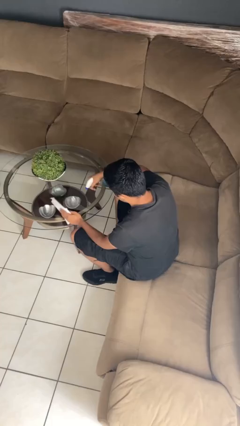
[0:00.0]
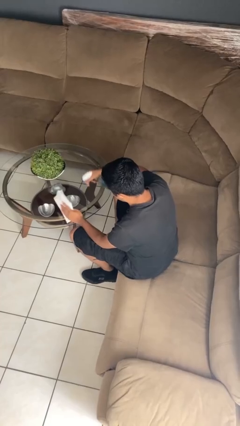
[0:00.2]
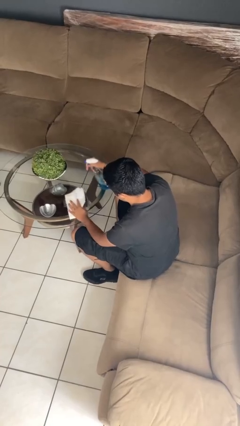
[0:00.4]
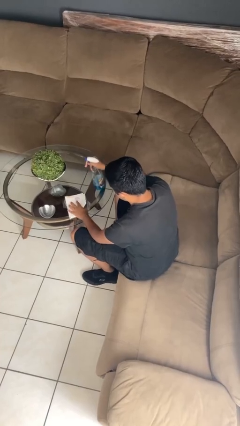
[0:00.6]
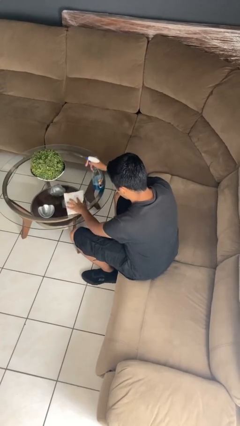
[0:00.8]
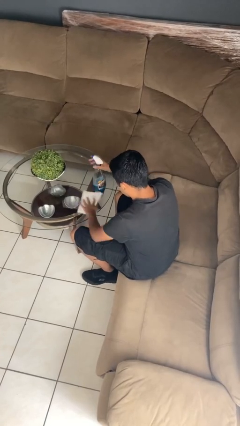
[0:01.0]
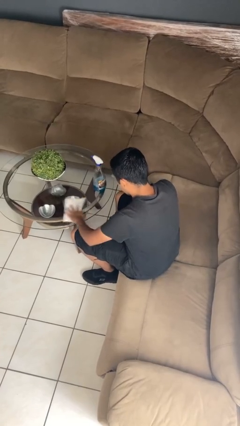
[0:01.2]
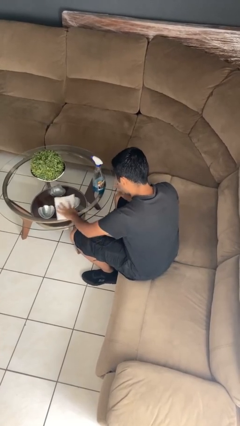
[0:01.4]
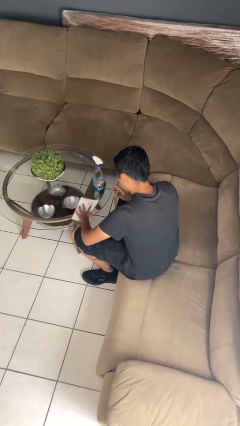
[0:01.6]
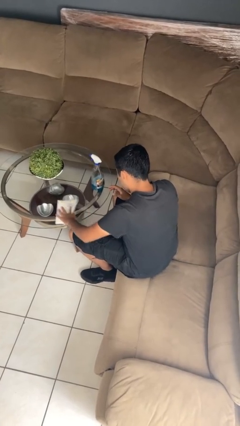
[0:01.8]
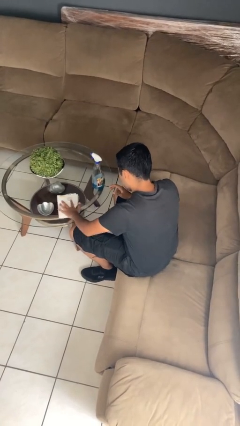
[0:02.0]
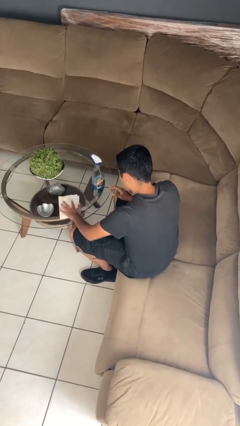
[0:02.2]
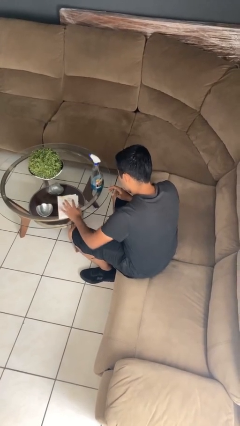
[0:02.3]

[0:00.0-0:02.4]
person cleans table with rag

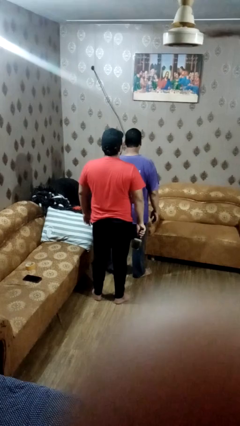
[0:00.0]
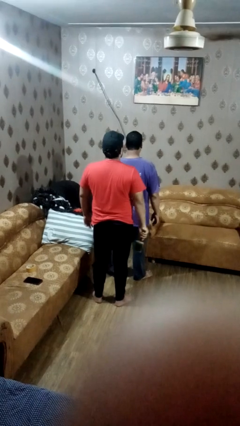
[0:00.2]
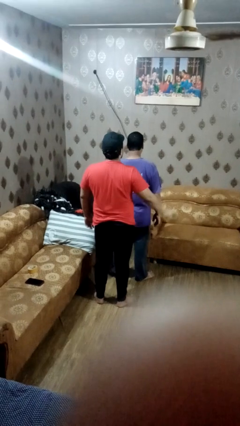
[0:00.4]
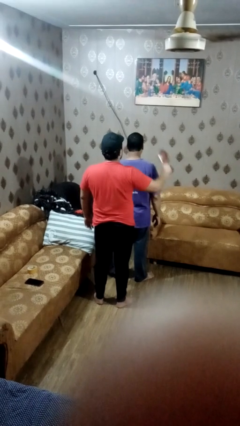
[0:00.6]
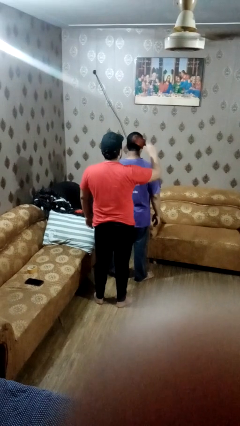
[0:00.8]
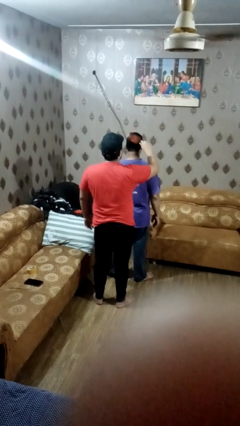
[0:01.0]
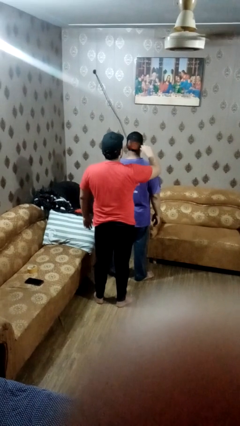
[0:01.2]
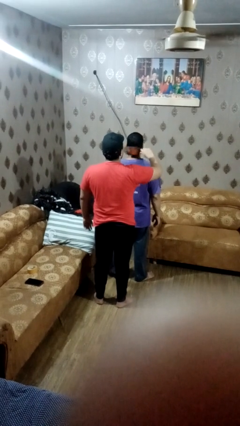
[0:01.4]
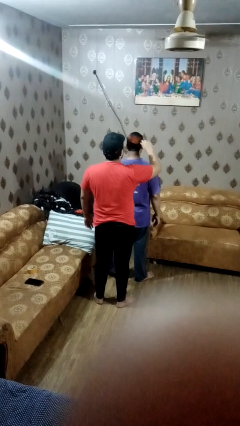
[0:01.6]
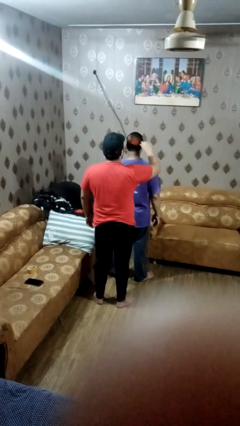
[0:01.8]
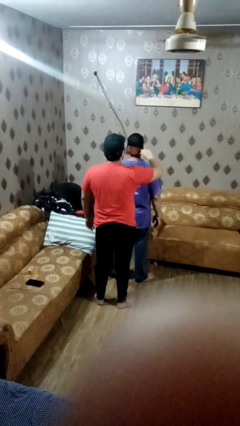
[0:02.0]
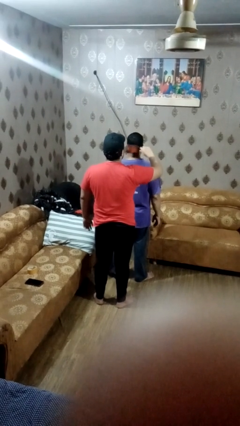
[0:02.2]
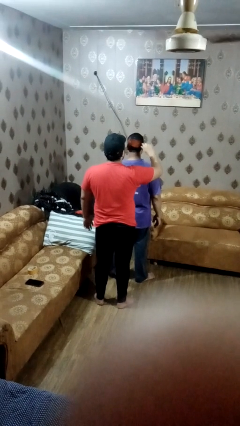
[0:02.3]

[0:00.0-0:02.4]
person brushes hair of person

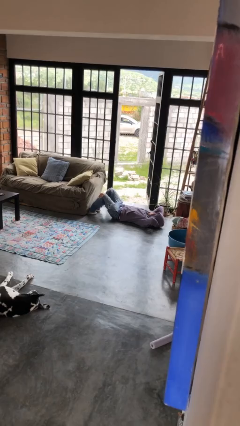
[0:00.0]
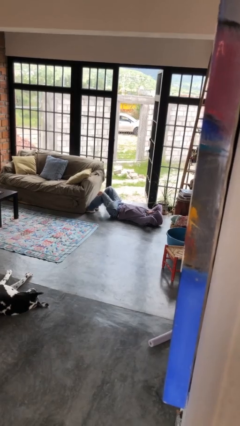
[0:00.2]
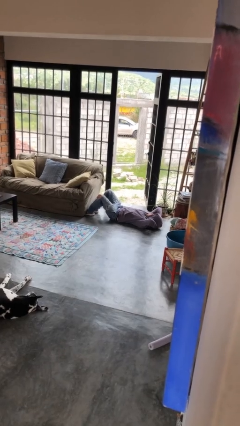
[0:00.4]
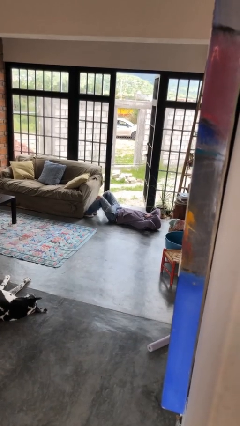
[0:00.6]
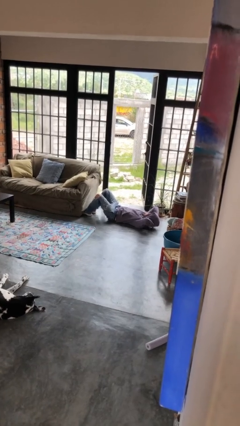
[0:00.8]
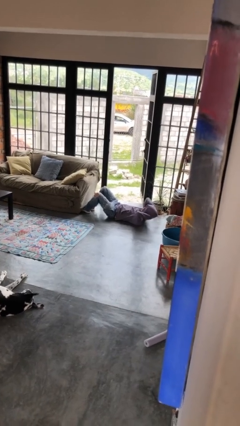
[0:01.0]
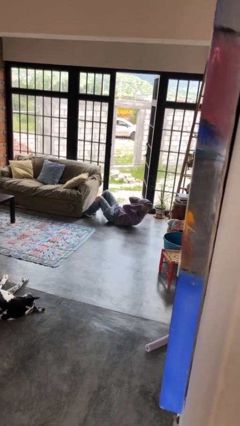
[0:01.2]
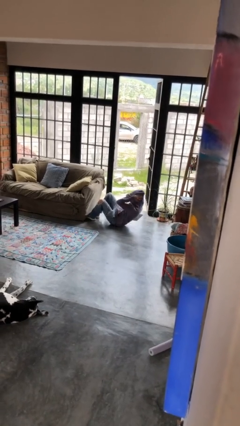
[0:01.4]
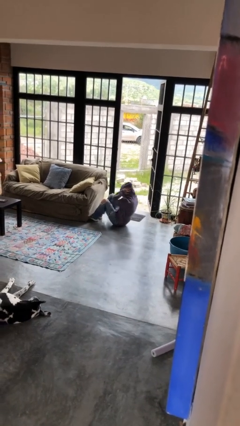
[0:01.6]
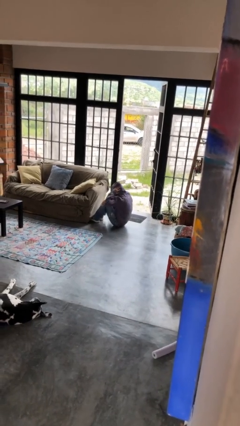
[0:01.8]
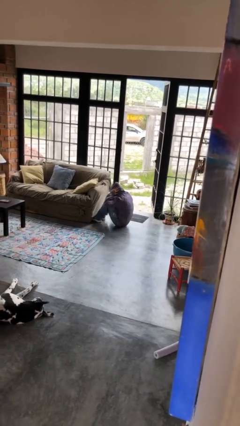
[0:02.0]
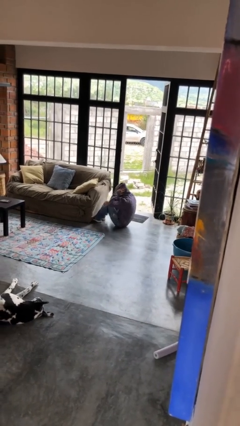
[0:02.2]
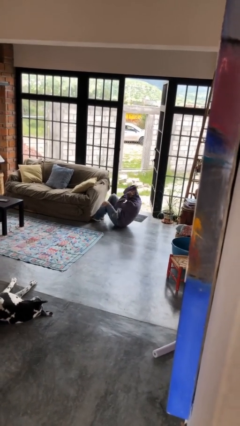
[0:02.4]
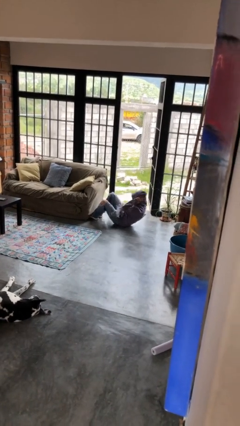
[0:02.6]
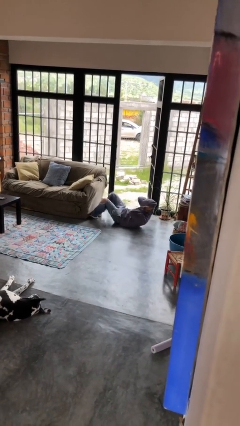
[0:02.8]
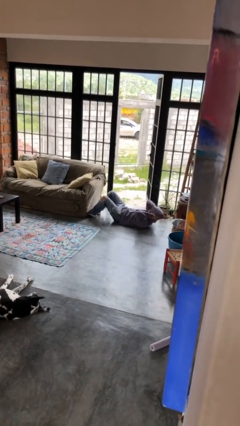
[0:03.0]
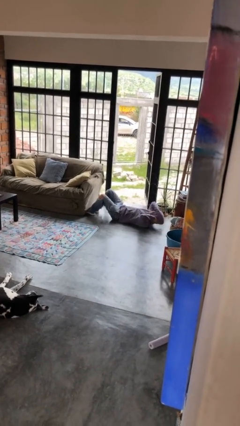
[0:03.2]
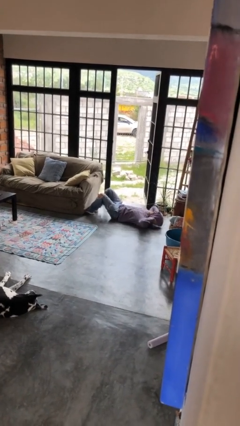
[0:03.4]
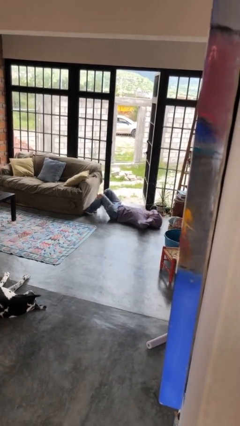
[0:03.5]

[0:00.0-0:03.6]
person exercises with situp

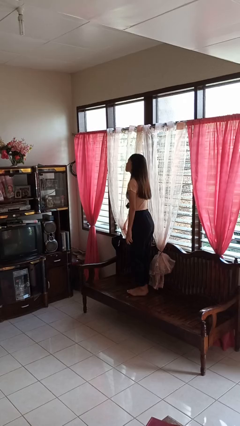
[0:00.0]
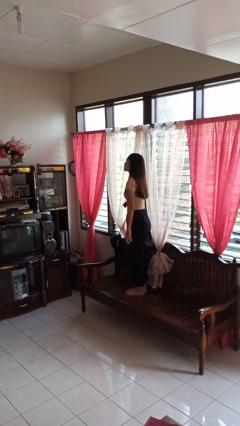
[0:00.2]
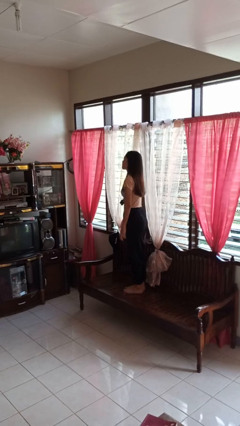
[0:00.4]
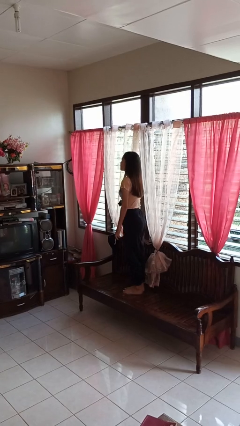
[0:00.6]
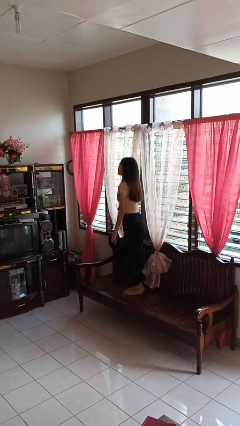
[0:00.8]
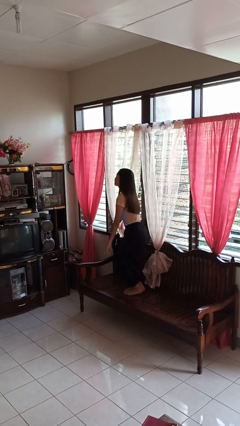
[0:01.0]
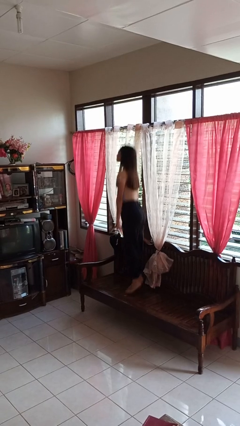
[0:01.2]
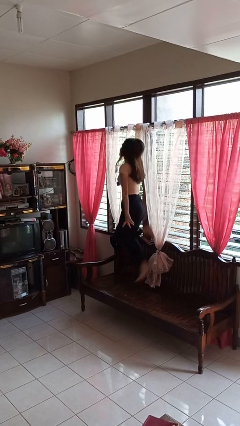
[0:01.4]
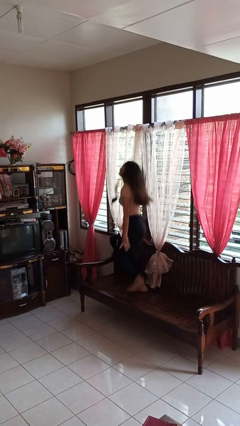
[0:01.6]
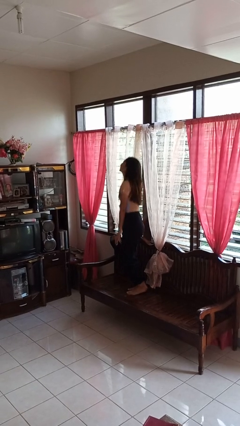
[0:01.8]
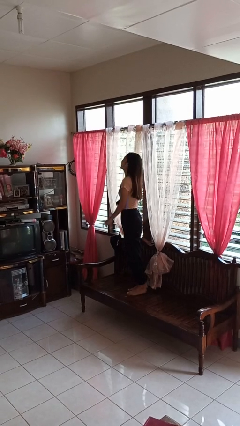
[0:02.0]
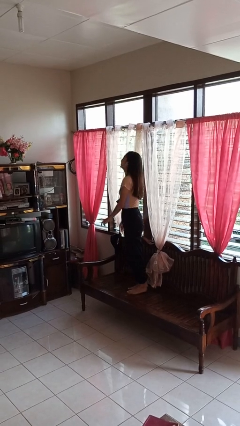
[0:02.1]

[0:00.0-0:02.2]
person jumps on couch

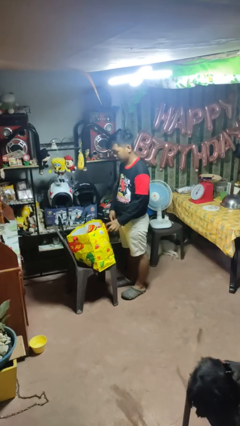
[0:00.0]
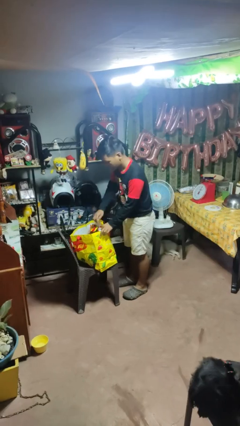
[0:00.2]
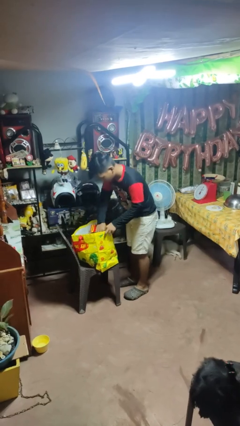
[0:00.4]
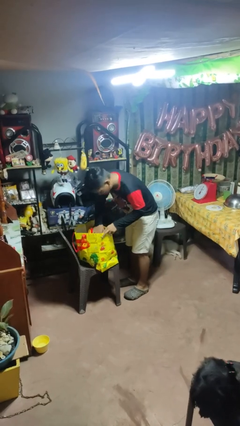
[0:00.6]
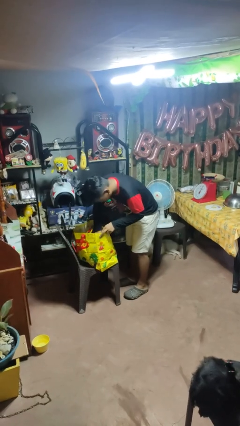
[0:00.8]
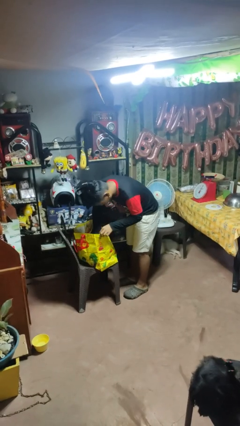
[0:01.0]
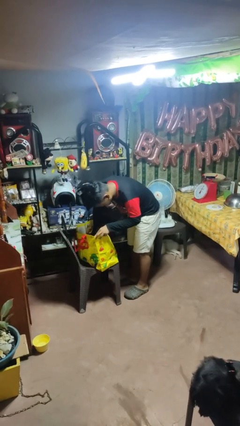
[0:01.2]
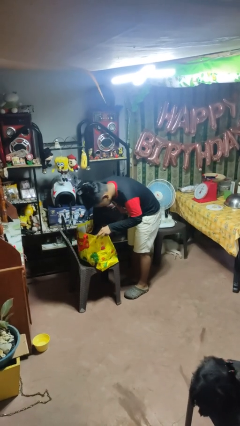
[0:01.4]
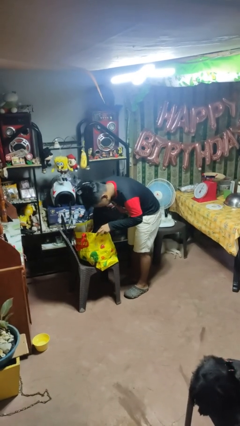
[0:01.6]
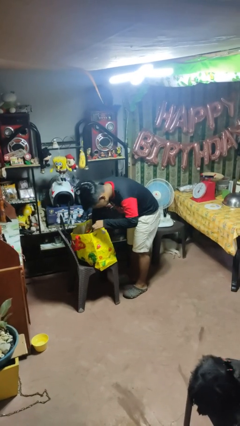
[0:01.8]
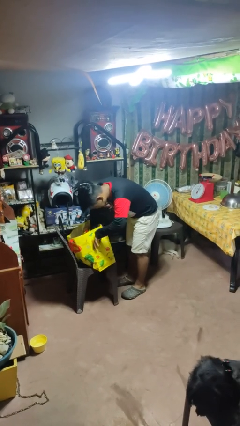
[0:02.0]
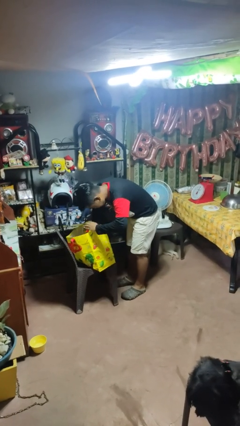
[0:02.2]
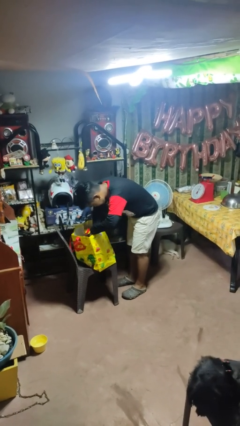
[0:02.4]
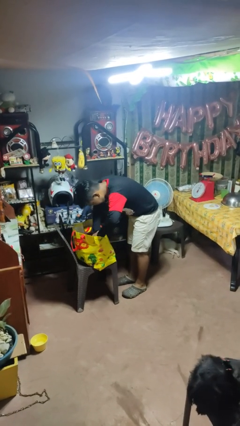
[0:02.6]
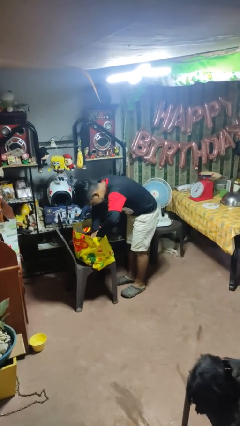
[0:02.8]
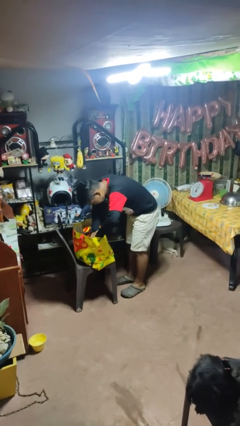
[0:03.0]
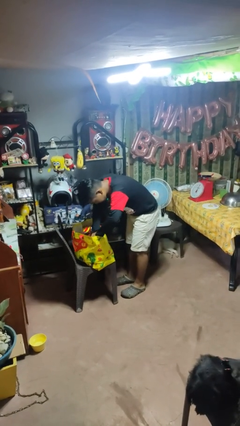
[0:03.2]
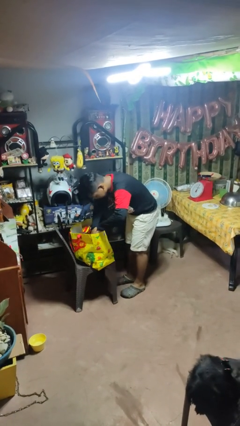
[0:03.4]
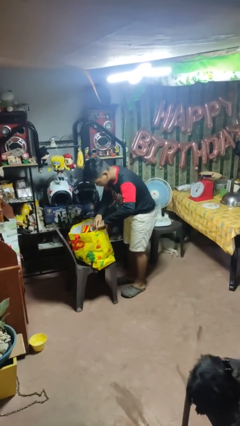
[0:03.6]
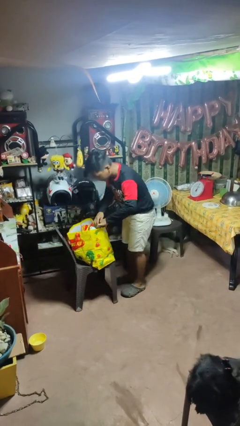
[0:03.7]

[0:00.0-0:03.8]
person searches in bag

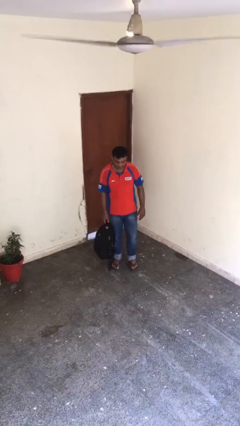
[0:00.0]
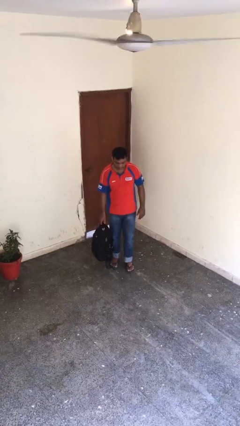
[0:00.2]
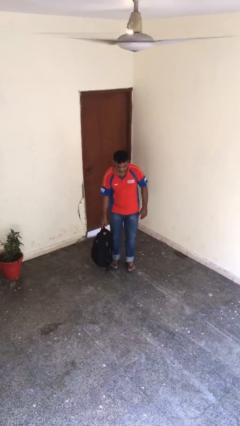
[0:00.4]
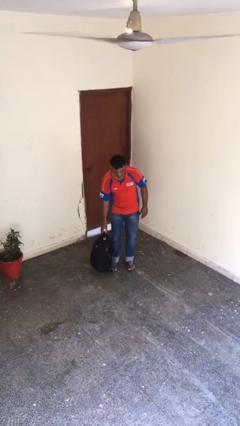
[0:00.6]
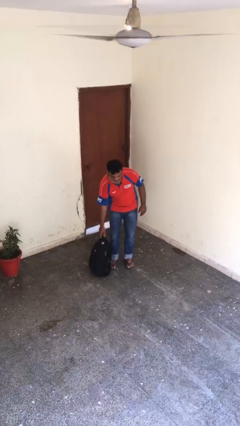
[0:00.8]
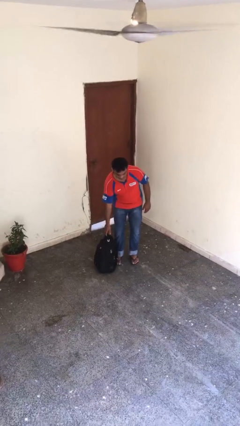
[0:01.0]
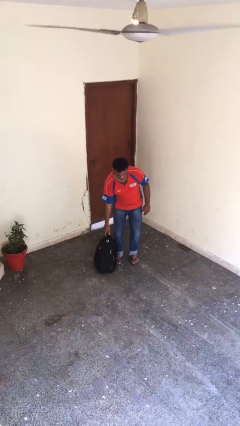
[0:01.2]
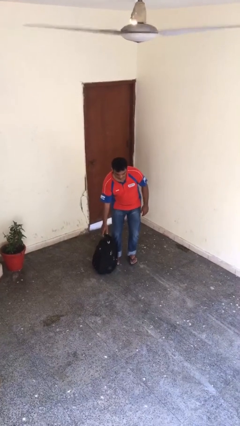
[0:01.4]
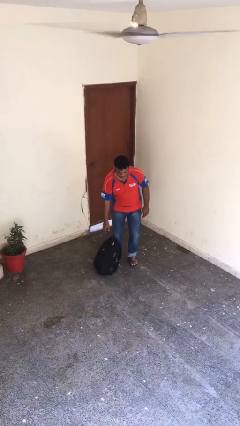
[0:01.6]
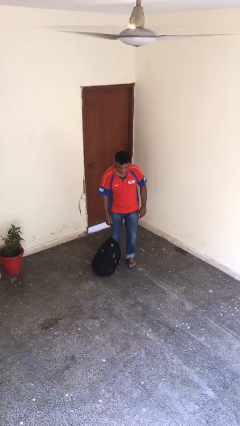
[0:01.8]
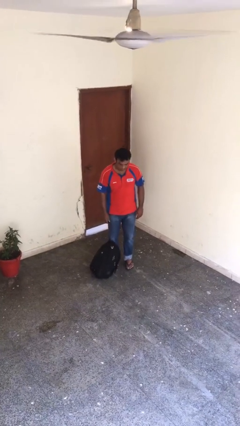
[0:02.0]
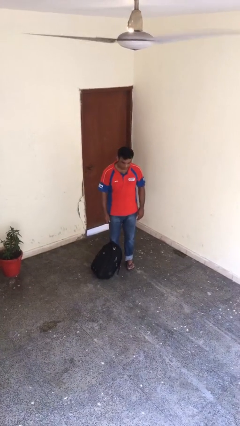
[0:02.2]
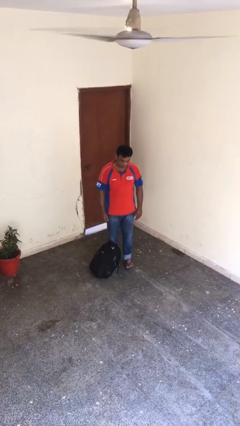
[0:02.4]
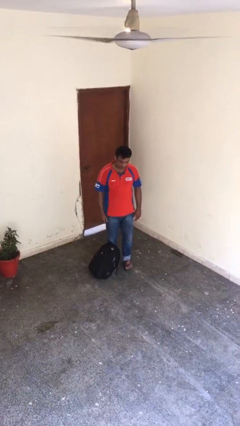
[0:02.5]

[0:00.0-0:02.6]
person puts down object on floor

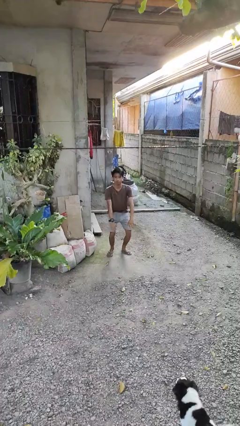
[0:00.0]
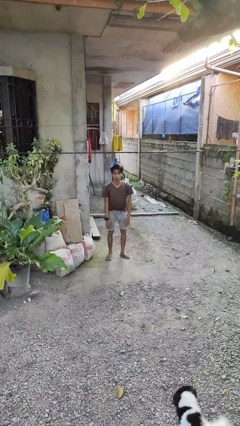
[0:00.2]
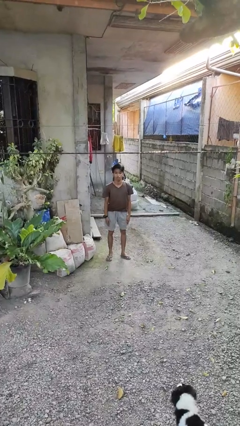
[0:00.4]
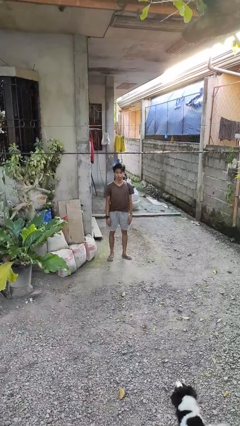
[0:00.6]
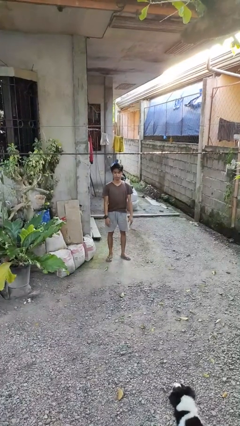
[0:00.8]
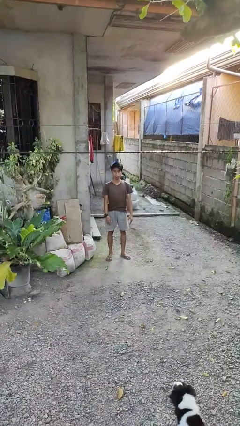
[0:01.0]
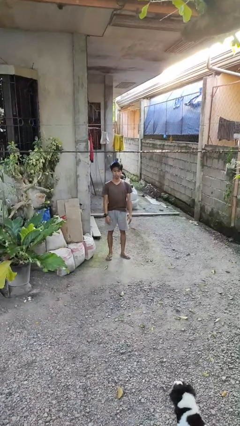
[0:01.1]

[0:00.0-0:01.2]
person stands up
